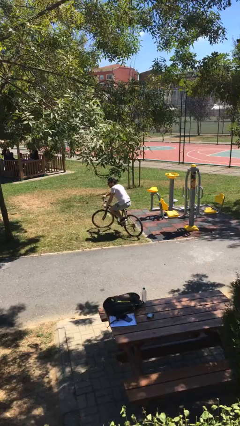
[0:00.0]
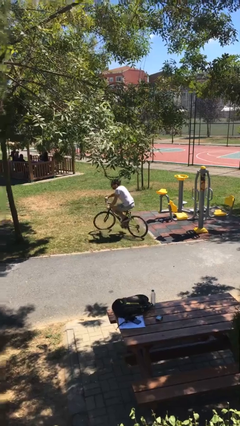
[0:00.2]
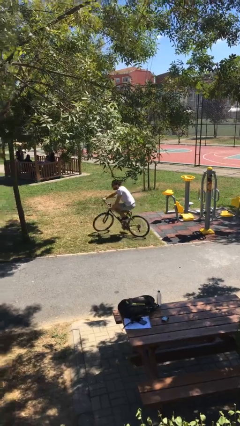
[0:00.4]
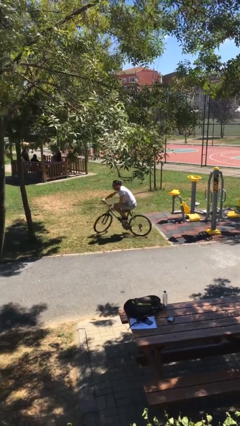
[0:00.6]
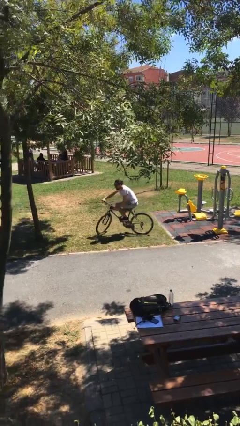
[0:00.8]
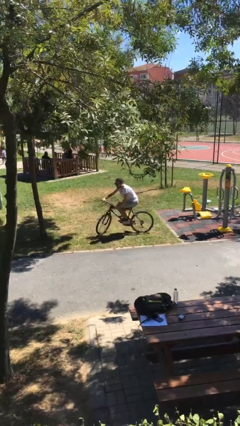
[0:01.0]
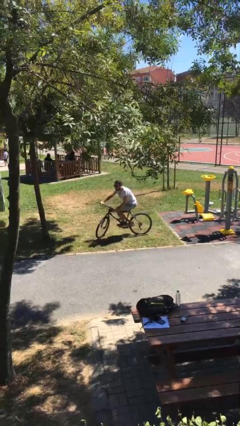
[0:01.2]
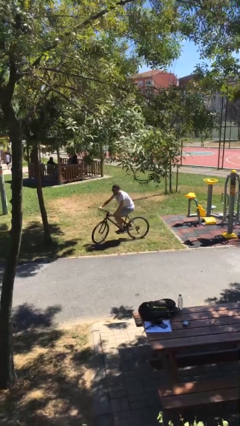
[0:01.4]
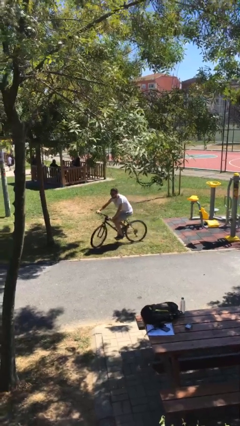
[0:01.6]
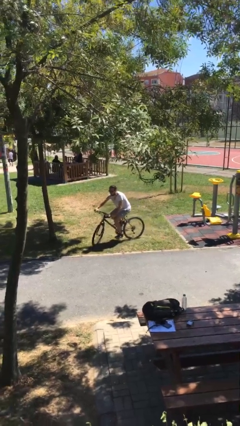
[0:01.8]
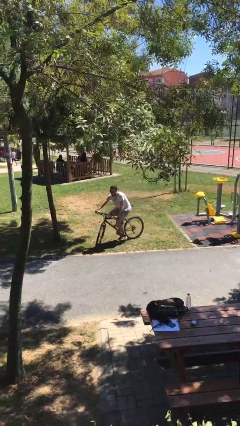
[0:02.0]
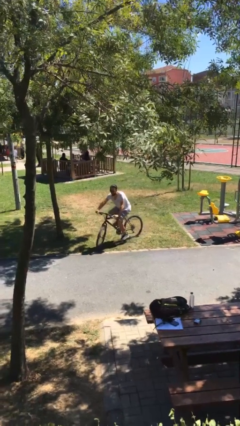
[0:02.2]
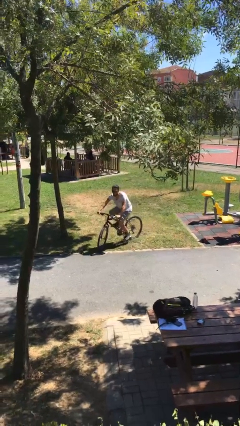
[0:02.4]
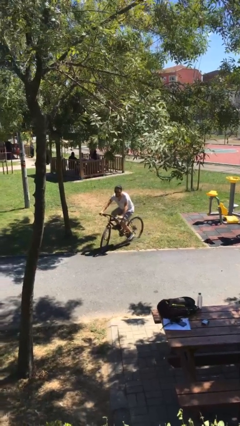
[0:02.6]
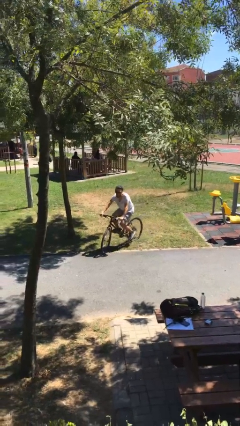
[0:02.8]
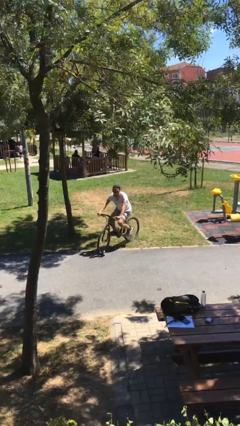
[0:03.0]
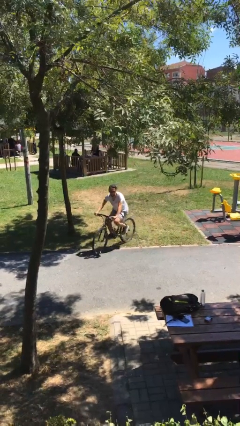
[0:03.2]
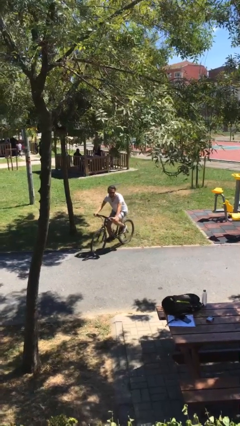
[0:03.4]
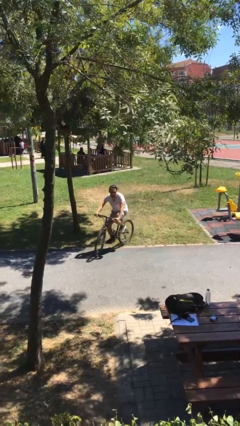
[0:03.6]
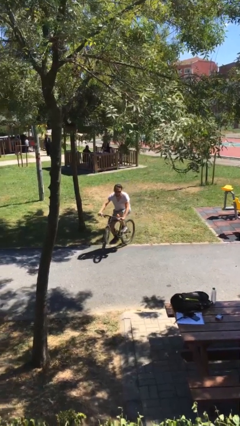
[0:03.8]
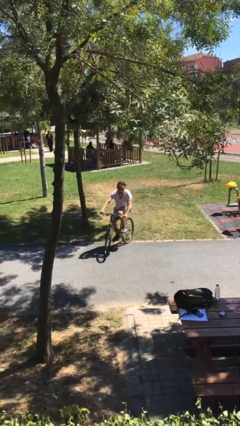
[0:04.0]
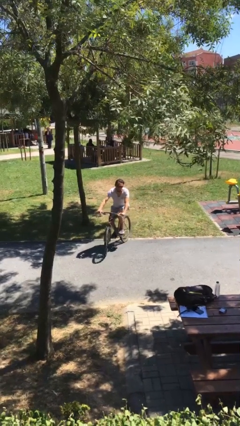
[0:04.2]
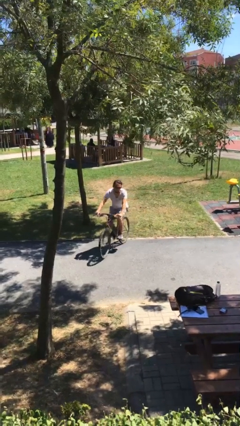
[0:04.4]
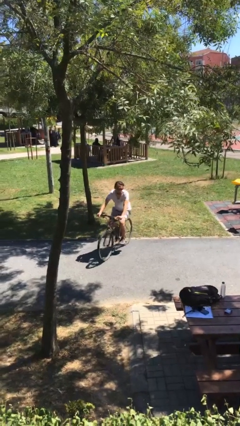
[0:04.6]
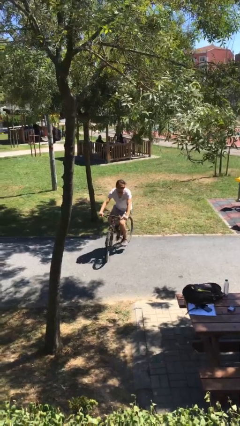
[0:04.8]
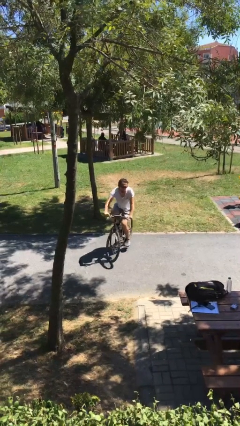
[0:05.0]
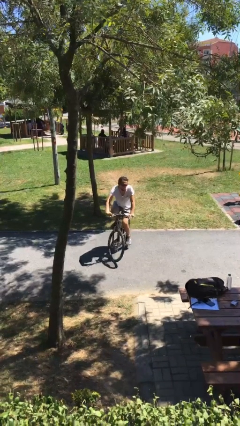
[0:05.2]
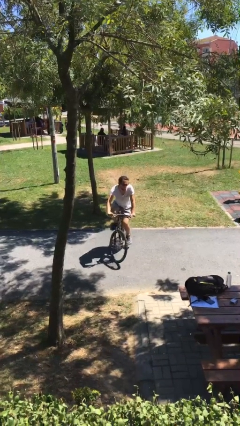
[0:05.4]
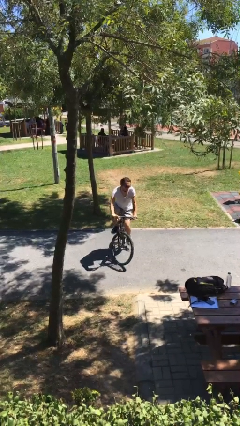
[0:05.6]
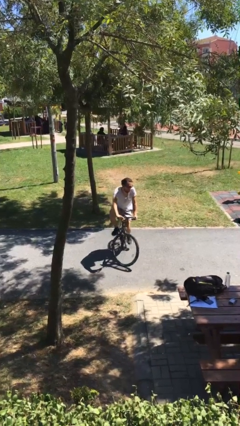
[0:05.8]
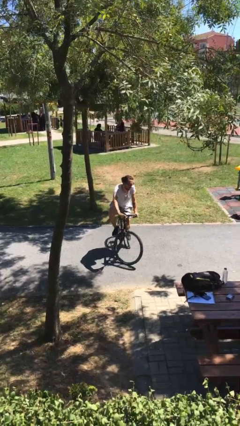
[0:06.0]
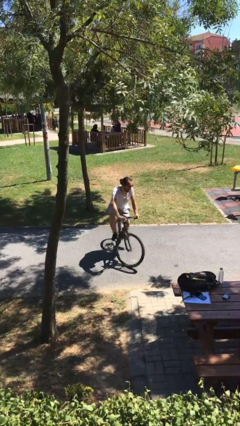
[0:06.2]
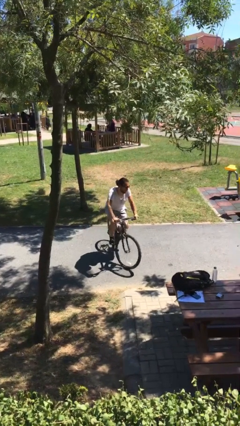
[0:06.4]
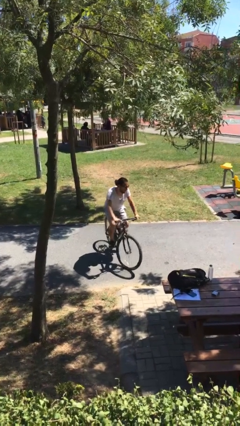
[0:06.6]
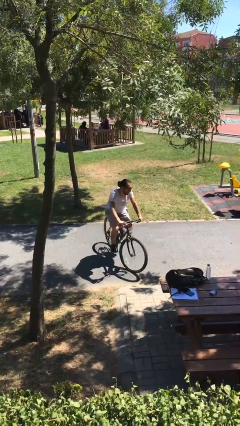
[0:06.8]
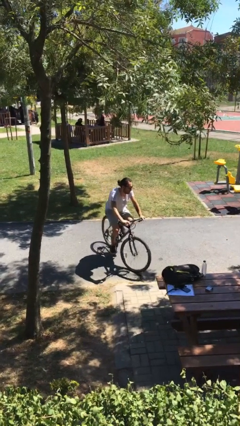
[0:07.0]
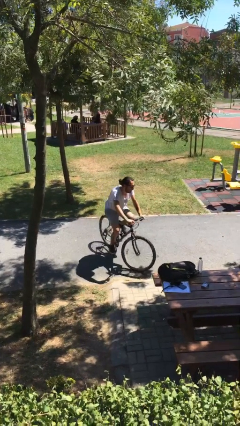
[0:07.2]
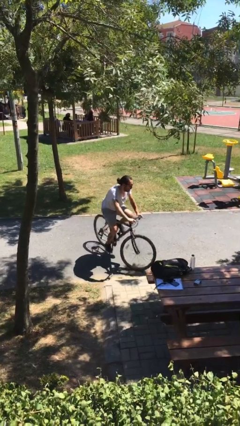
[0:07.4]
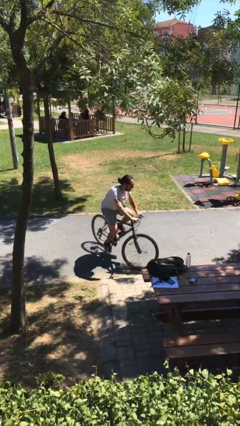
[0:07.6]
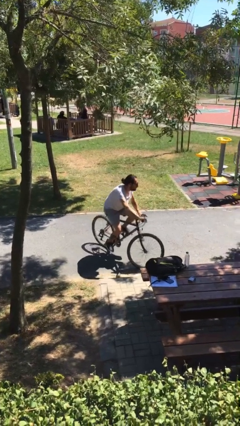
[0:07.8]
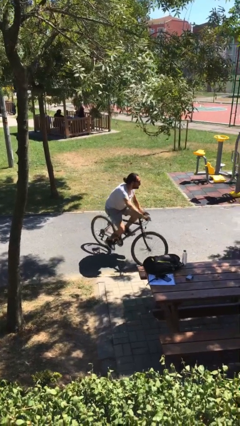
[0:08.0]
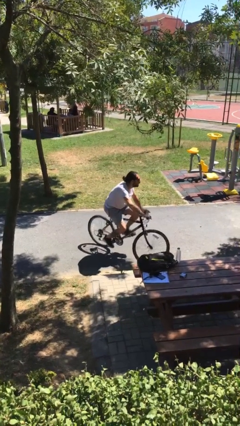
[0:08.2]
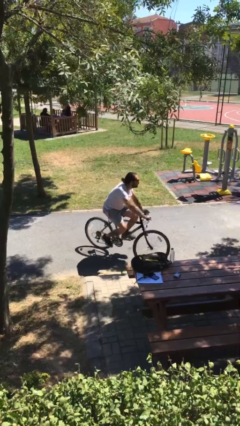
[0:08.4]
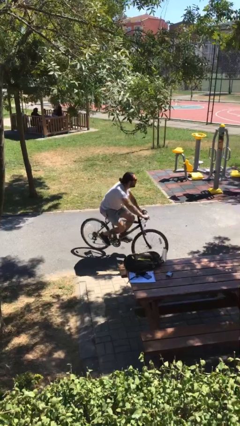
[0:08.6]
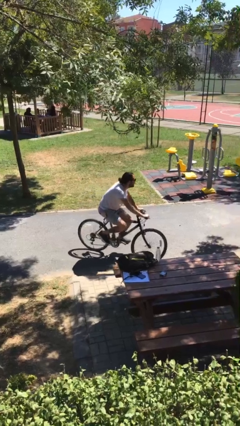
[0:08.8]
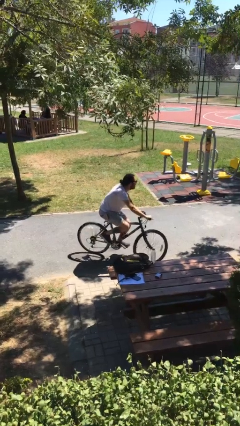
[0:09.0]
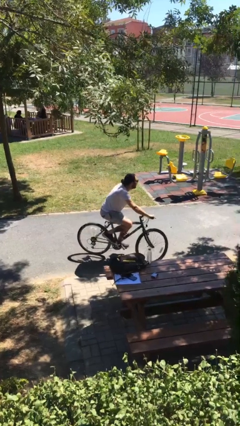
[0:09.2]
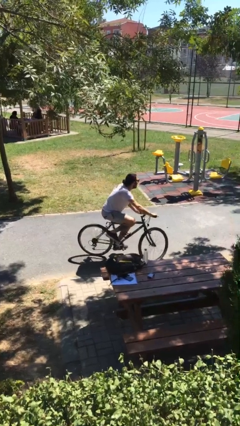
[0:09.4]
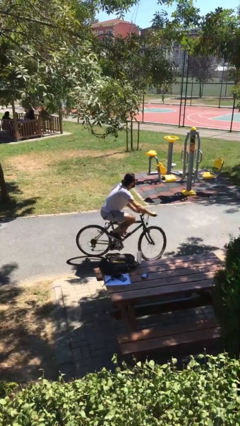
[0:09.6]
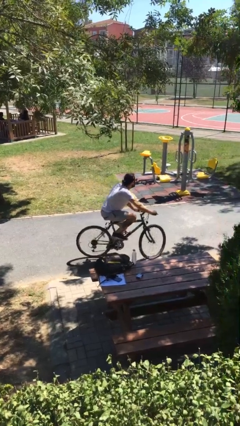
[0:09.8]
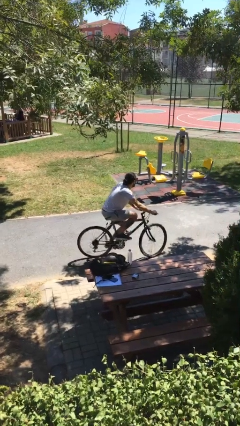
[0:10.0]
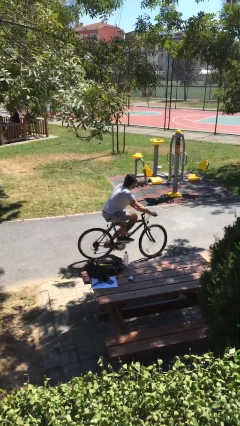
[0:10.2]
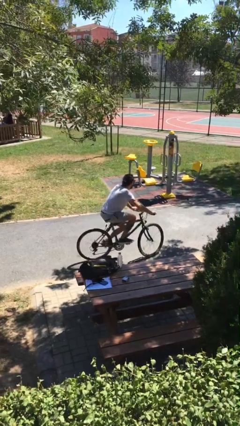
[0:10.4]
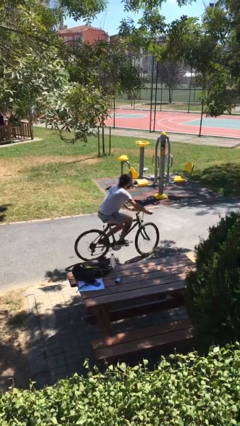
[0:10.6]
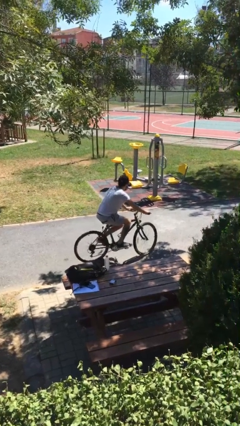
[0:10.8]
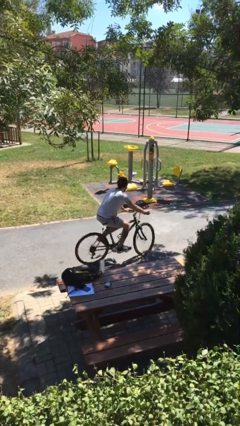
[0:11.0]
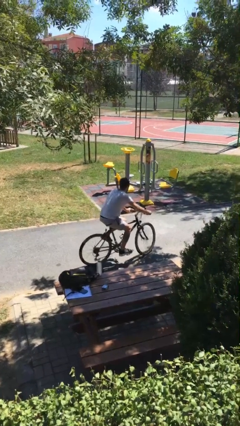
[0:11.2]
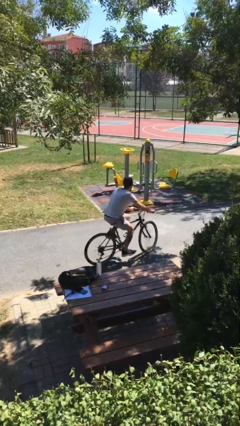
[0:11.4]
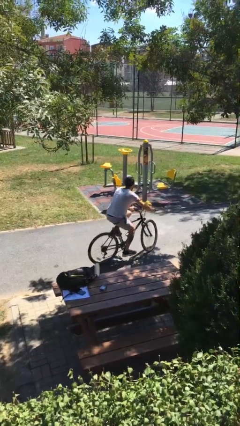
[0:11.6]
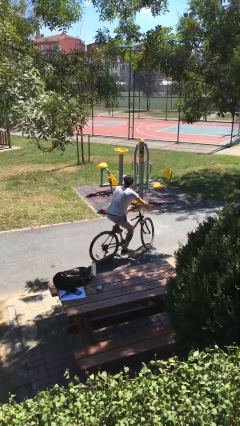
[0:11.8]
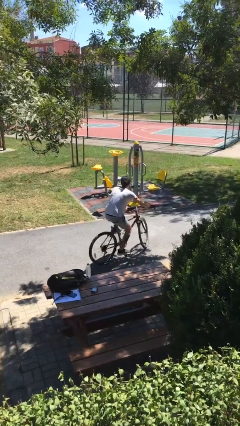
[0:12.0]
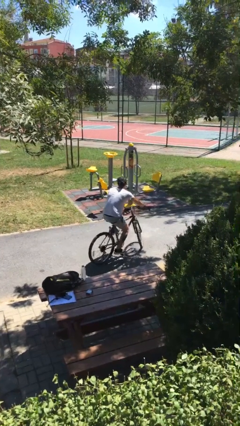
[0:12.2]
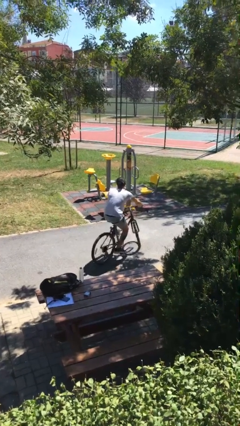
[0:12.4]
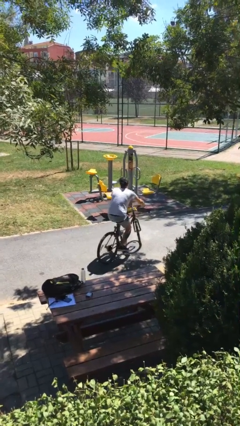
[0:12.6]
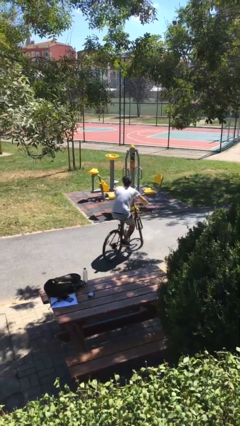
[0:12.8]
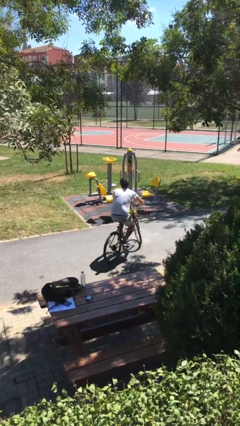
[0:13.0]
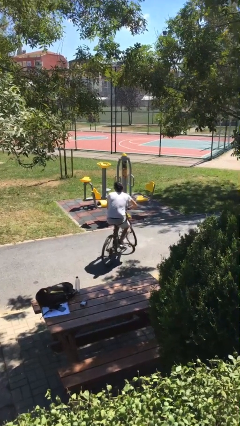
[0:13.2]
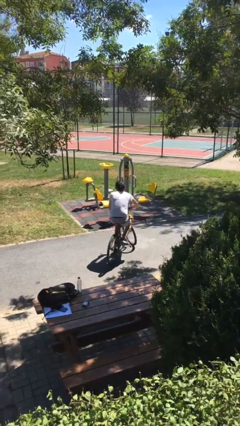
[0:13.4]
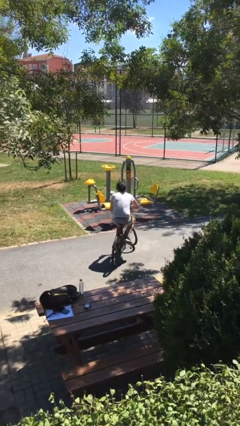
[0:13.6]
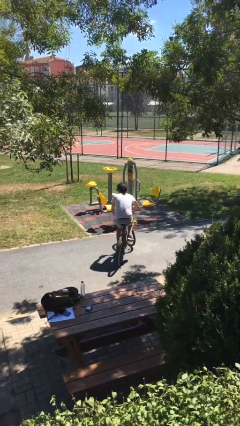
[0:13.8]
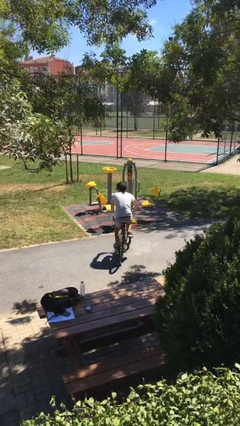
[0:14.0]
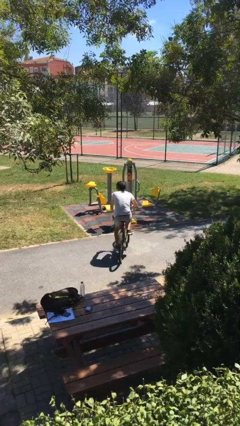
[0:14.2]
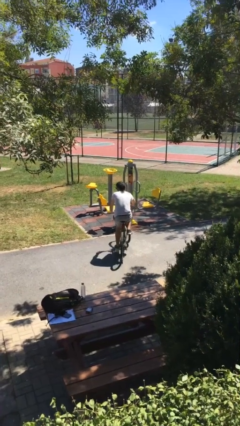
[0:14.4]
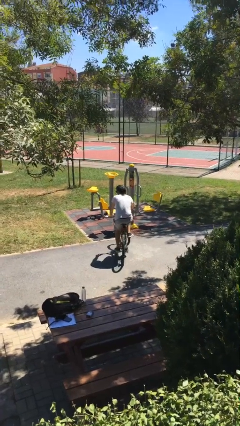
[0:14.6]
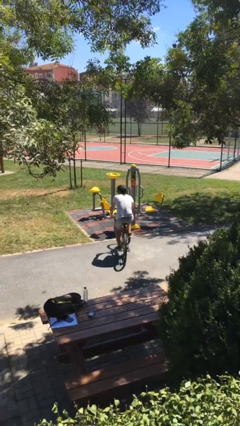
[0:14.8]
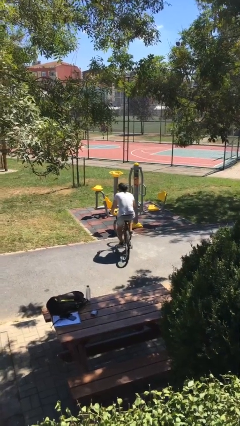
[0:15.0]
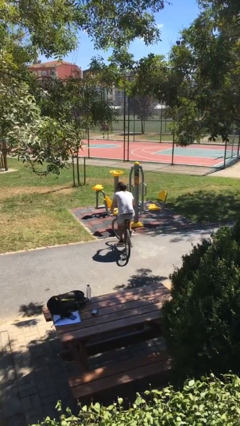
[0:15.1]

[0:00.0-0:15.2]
person rides bicycle

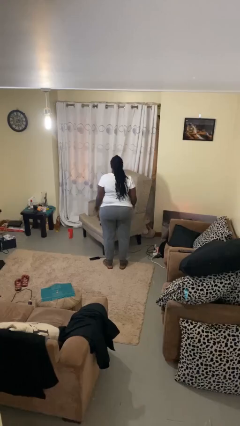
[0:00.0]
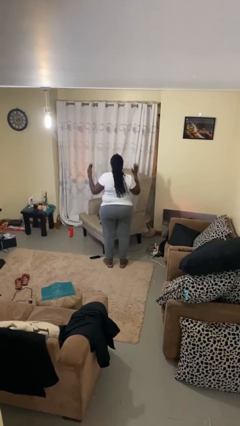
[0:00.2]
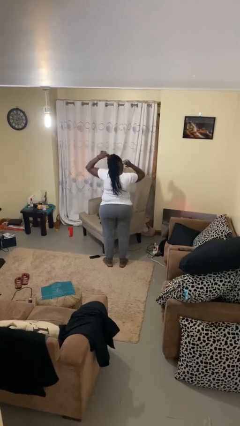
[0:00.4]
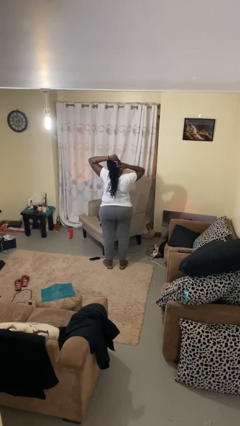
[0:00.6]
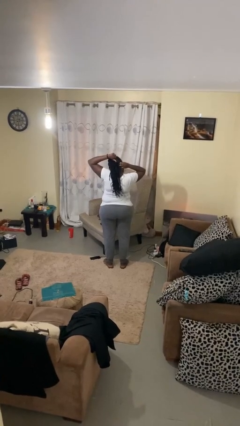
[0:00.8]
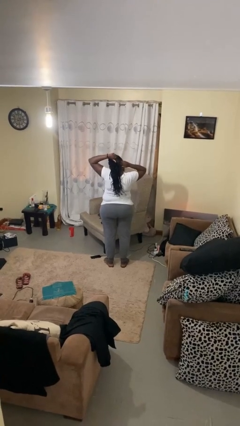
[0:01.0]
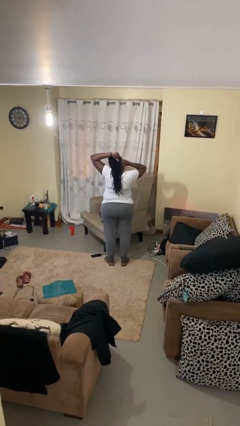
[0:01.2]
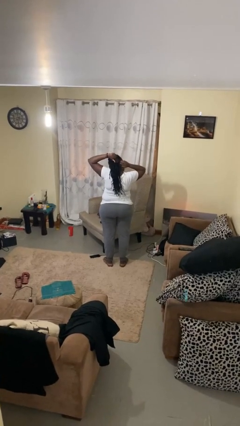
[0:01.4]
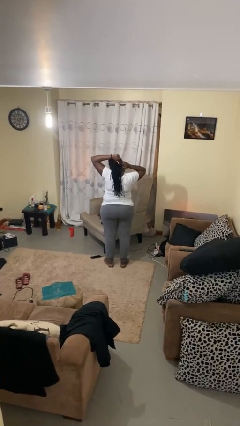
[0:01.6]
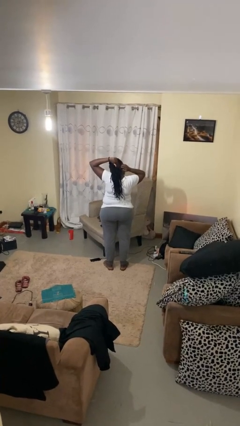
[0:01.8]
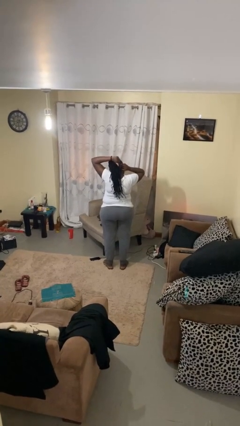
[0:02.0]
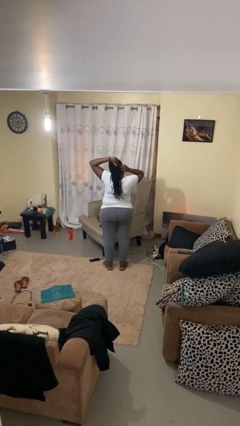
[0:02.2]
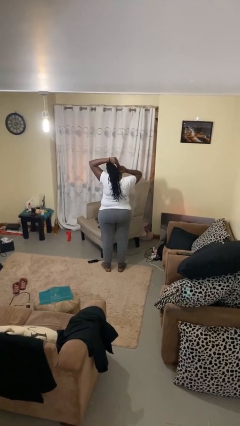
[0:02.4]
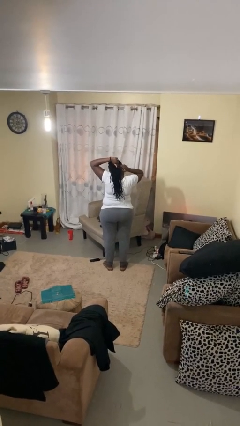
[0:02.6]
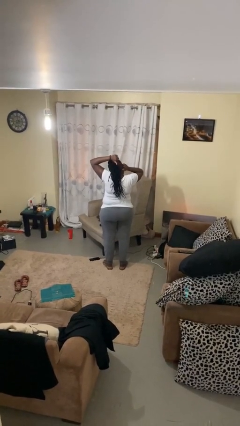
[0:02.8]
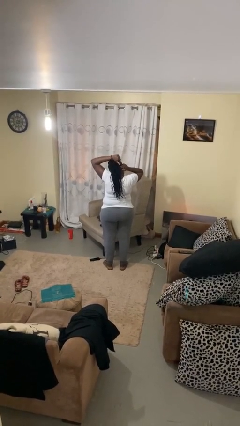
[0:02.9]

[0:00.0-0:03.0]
person brushes hair
